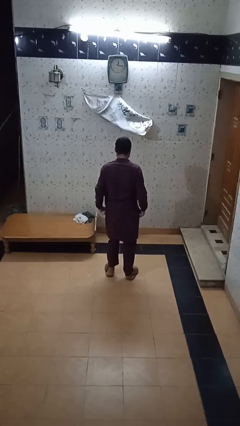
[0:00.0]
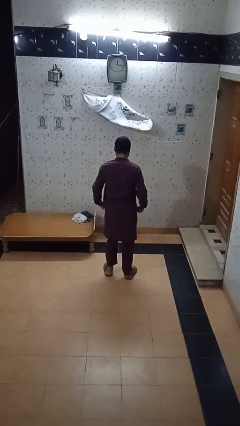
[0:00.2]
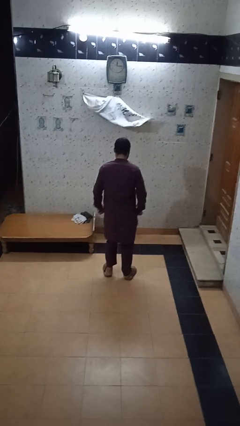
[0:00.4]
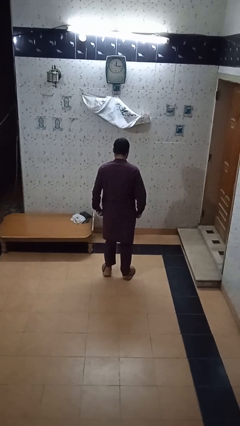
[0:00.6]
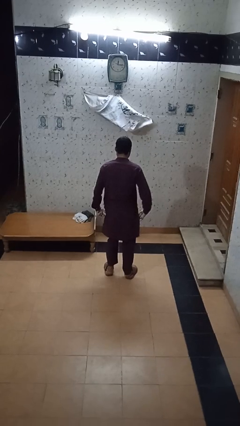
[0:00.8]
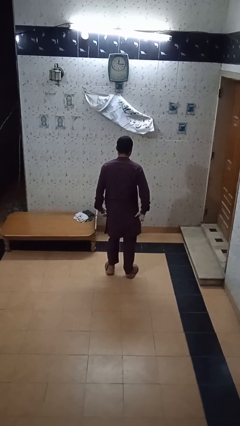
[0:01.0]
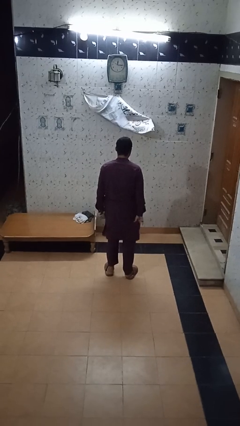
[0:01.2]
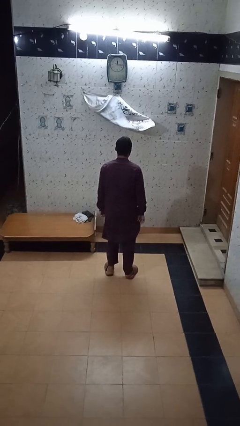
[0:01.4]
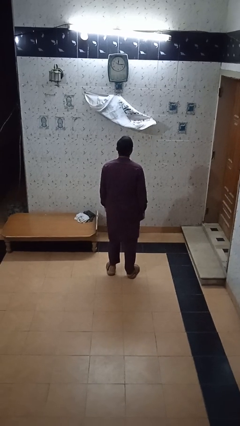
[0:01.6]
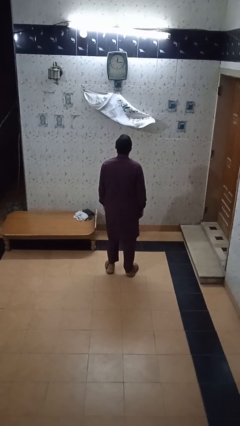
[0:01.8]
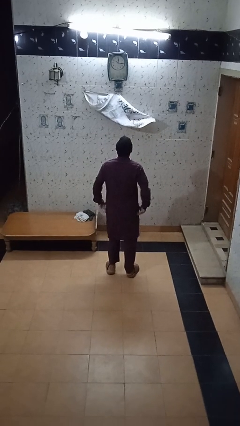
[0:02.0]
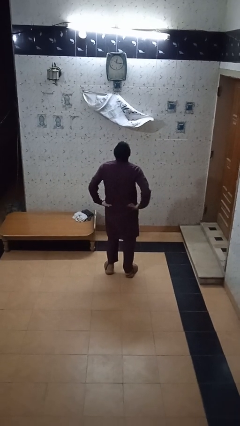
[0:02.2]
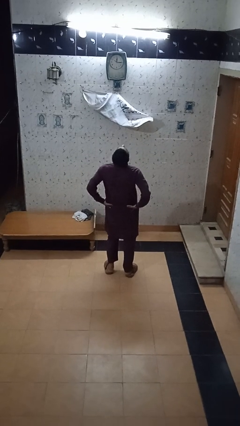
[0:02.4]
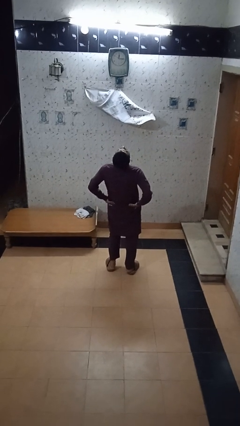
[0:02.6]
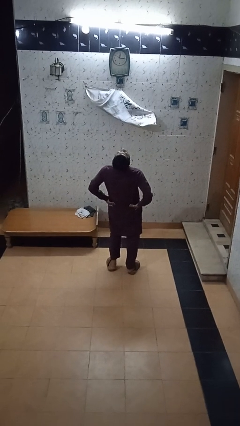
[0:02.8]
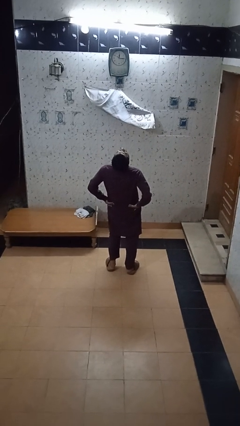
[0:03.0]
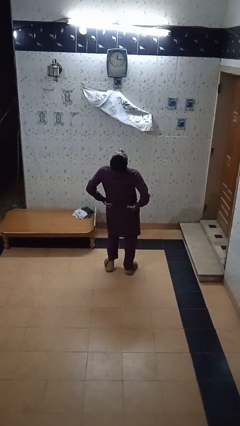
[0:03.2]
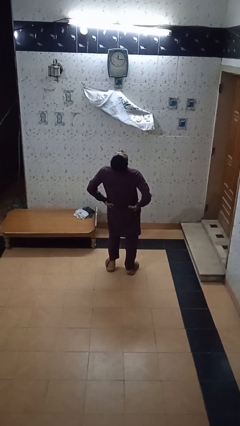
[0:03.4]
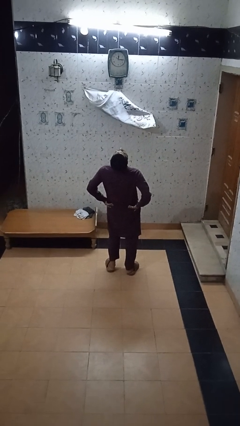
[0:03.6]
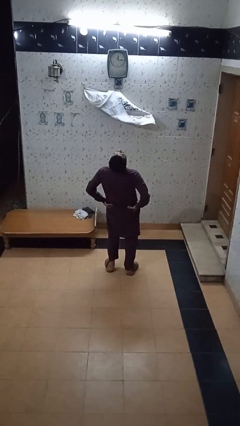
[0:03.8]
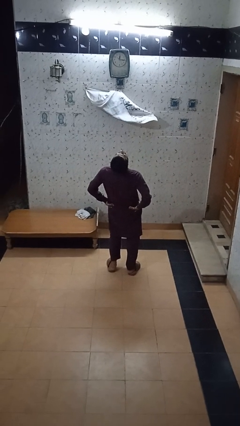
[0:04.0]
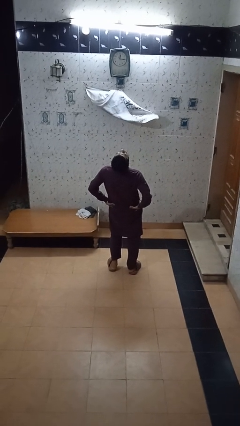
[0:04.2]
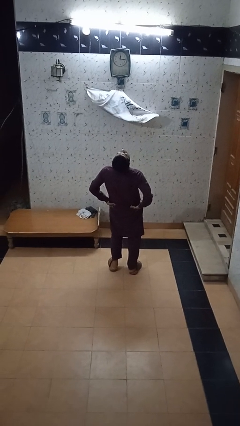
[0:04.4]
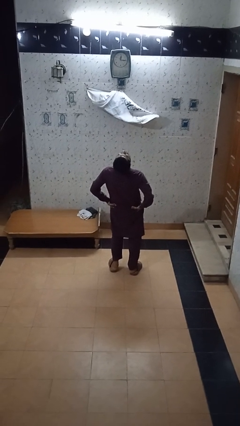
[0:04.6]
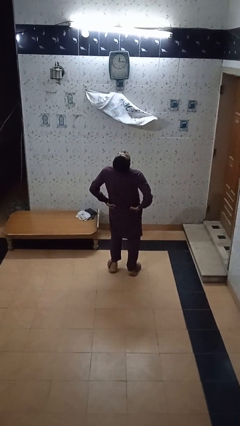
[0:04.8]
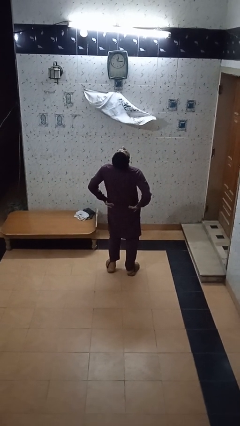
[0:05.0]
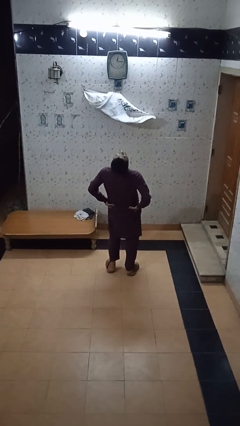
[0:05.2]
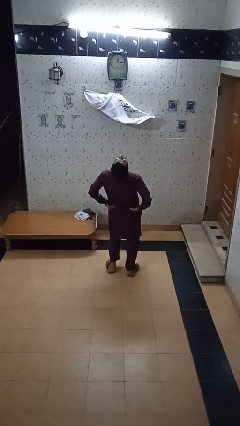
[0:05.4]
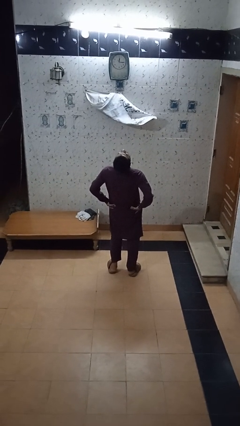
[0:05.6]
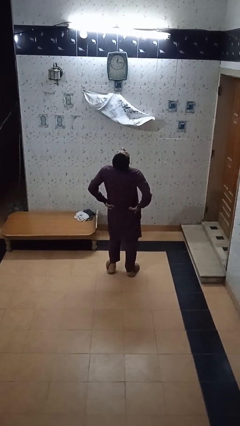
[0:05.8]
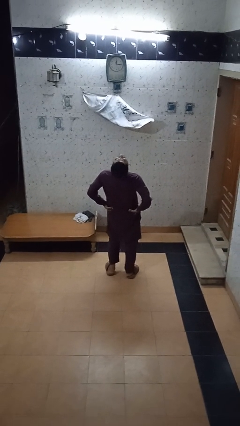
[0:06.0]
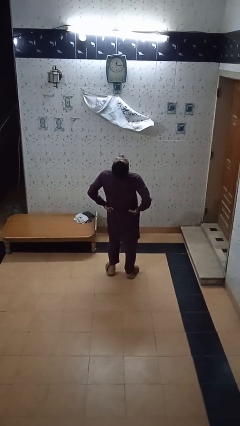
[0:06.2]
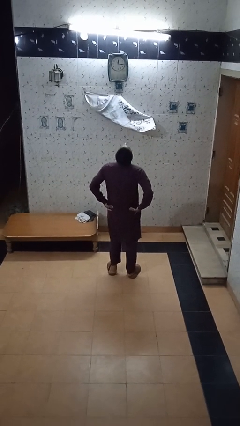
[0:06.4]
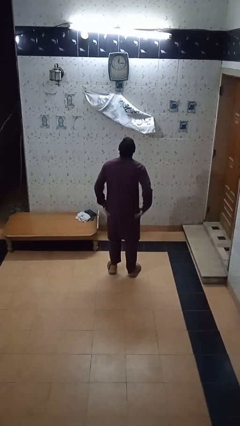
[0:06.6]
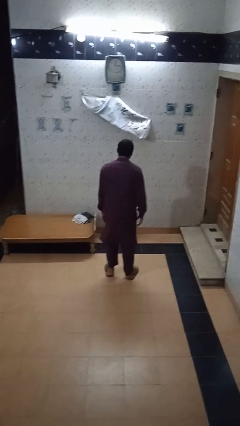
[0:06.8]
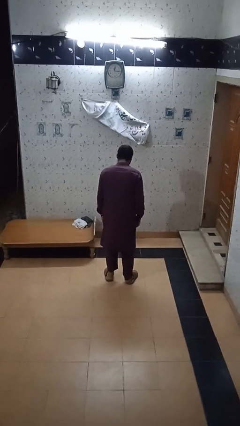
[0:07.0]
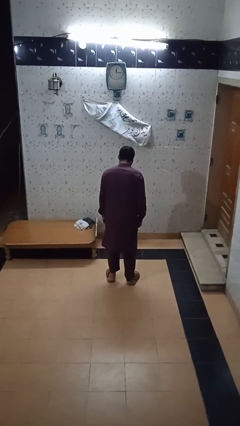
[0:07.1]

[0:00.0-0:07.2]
person stretches back

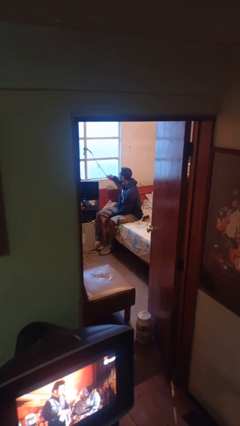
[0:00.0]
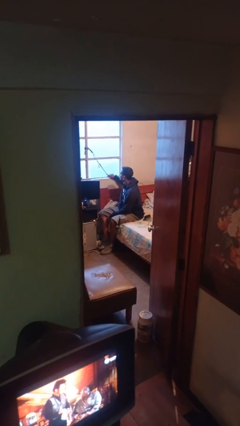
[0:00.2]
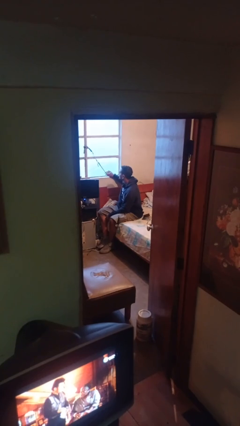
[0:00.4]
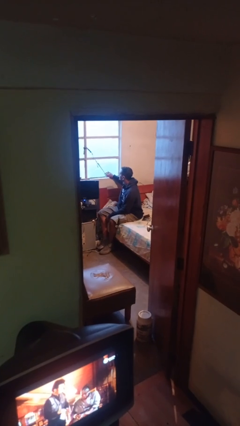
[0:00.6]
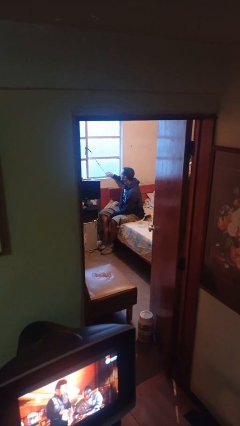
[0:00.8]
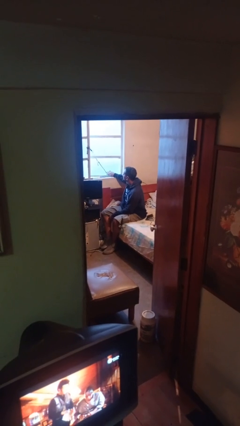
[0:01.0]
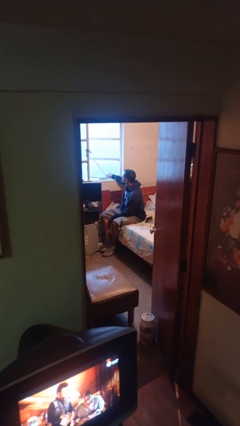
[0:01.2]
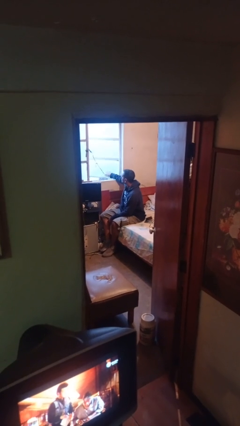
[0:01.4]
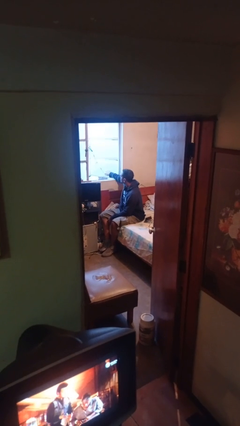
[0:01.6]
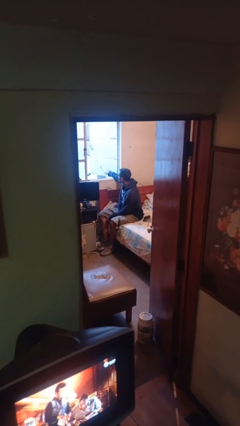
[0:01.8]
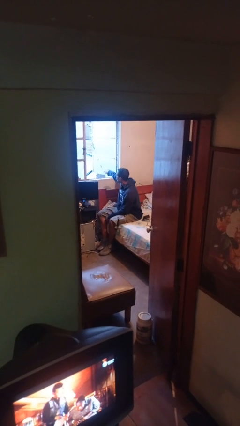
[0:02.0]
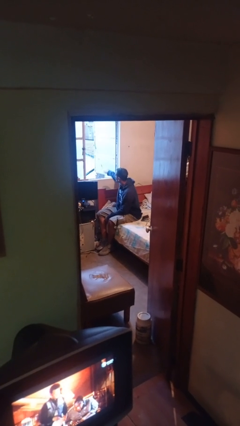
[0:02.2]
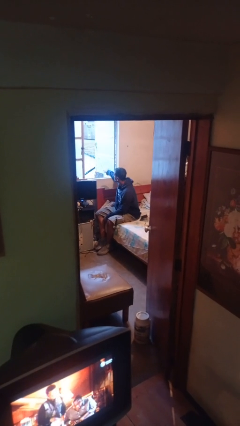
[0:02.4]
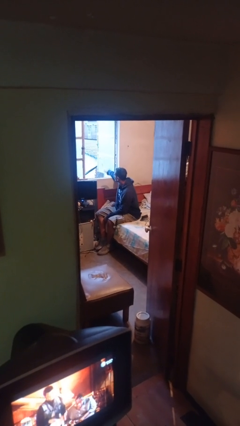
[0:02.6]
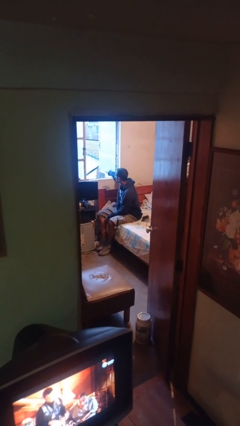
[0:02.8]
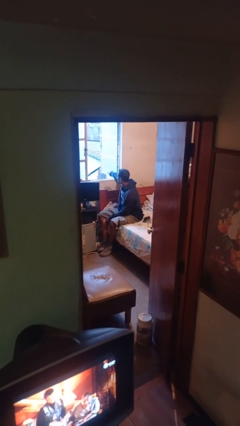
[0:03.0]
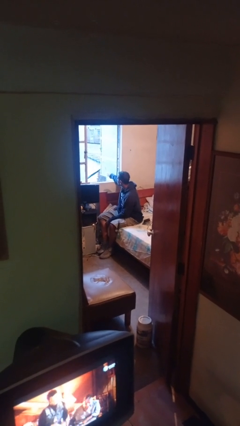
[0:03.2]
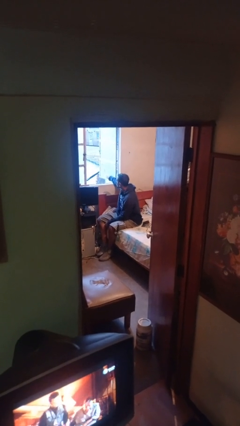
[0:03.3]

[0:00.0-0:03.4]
person opens home window

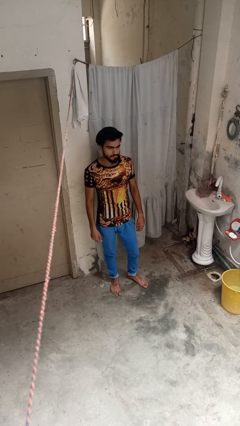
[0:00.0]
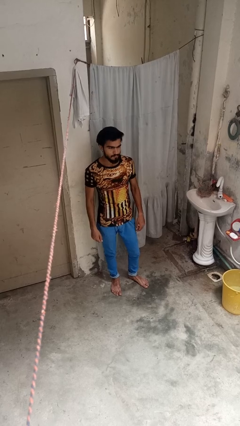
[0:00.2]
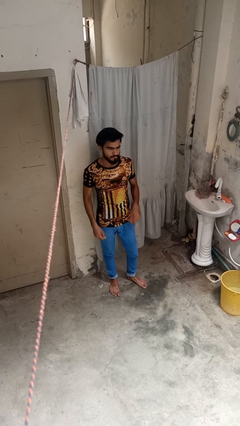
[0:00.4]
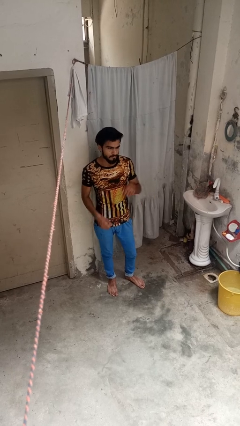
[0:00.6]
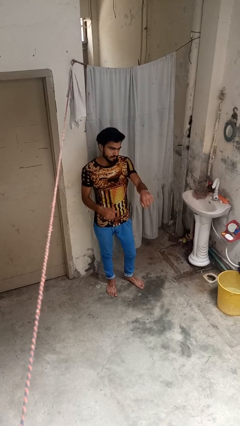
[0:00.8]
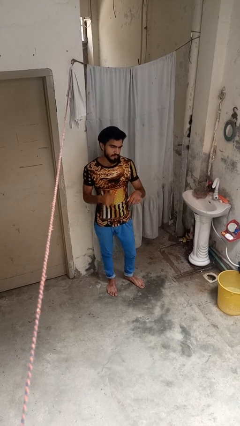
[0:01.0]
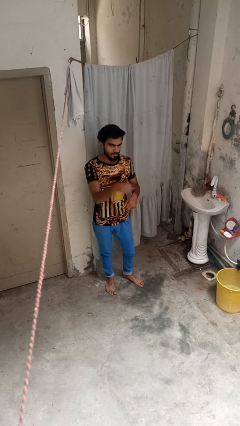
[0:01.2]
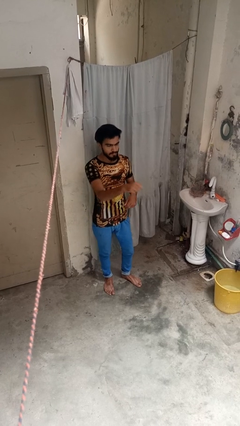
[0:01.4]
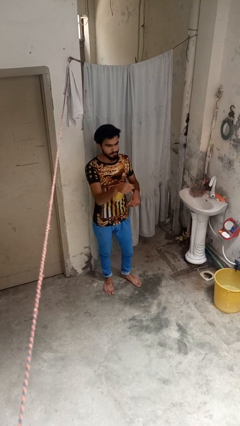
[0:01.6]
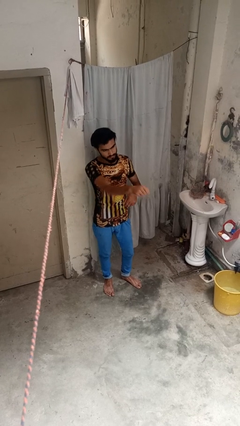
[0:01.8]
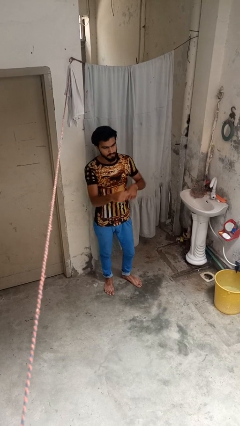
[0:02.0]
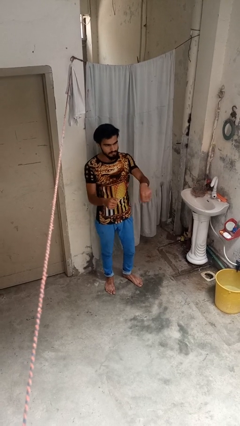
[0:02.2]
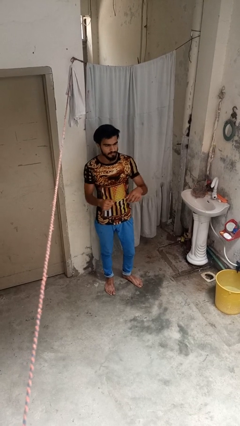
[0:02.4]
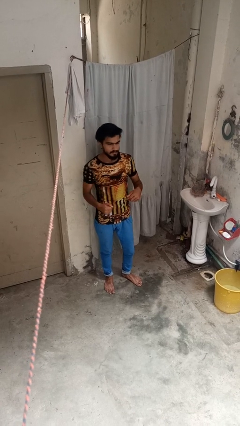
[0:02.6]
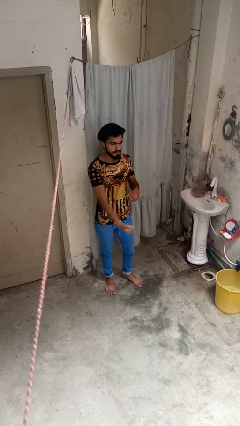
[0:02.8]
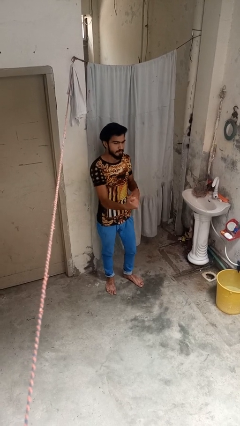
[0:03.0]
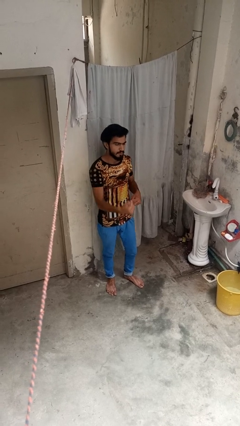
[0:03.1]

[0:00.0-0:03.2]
person punches

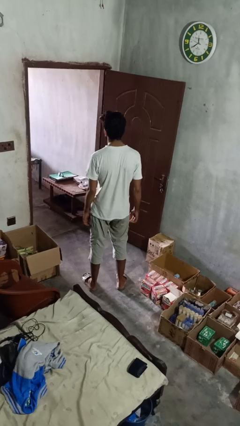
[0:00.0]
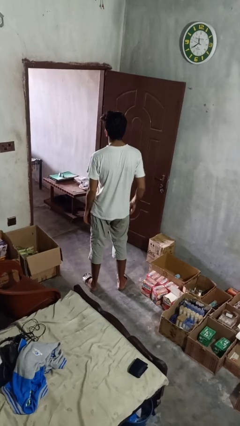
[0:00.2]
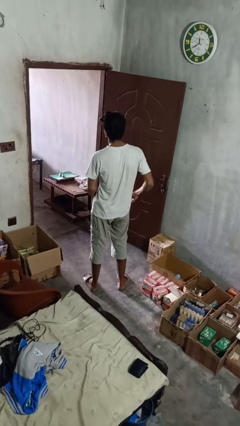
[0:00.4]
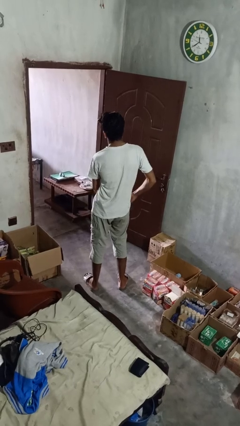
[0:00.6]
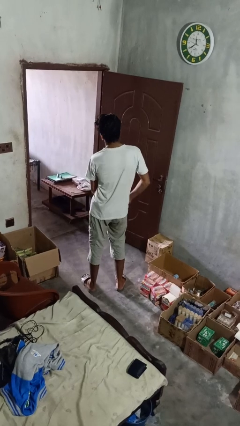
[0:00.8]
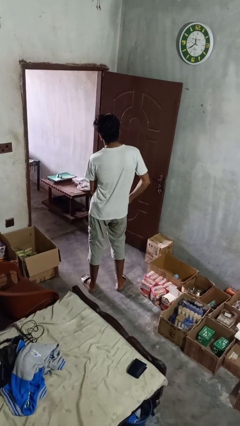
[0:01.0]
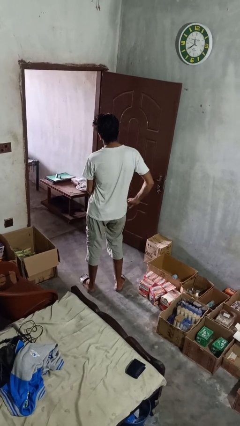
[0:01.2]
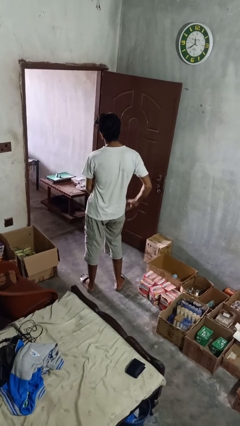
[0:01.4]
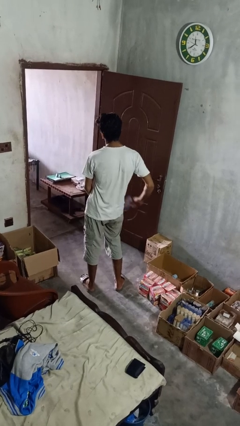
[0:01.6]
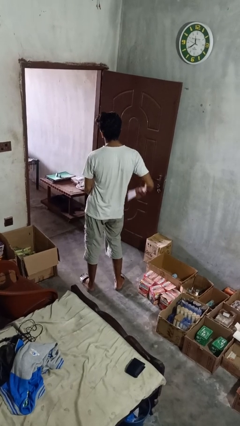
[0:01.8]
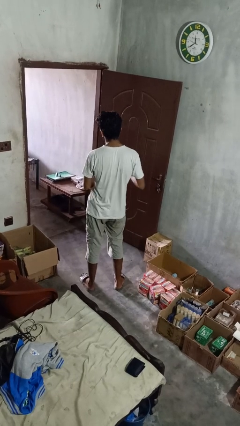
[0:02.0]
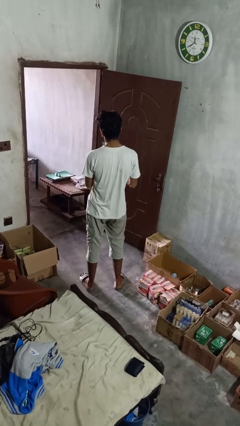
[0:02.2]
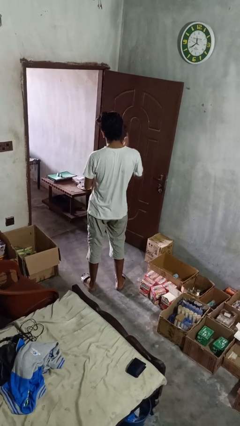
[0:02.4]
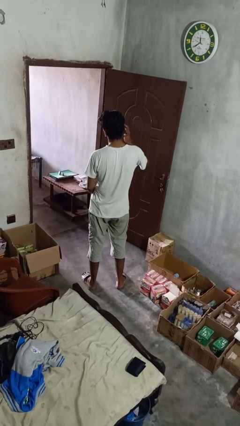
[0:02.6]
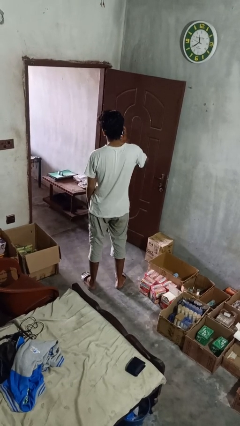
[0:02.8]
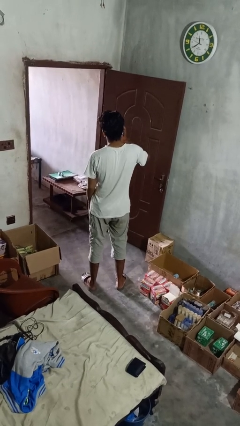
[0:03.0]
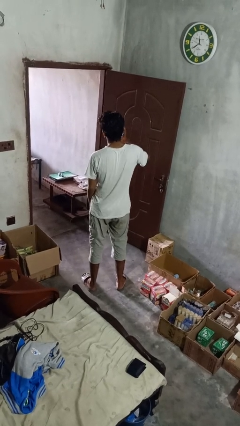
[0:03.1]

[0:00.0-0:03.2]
person takes phone from pocket

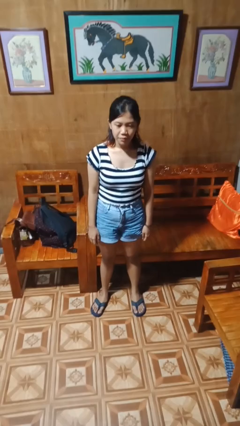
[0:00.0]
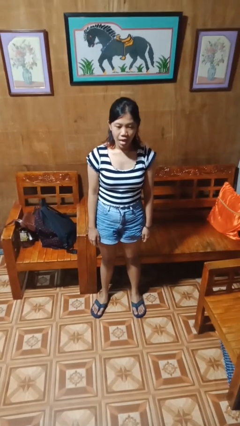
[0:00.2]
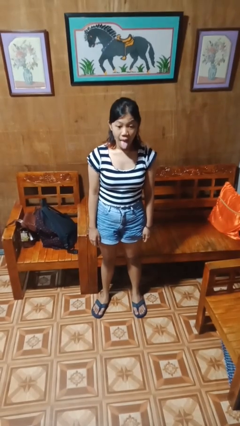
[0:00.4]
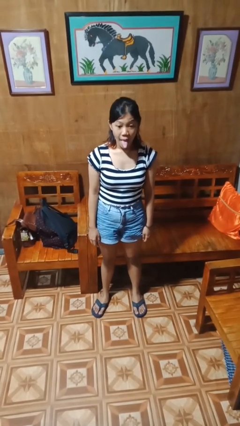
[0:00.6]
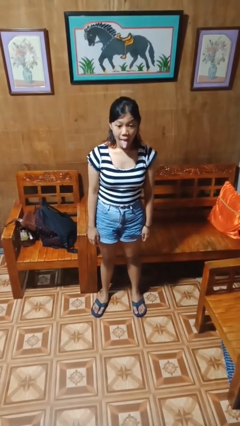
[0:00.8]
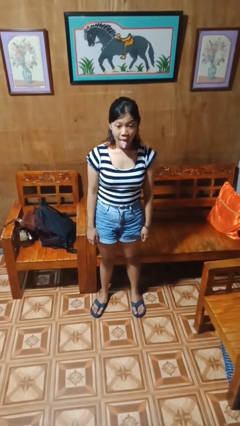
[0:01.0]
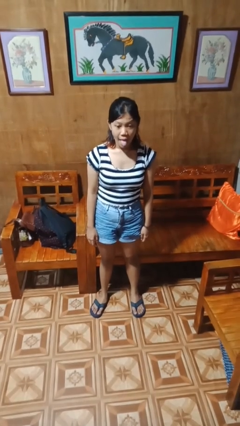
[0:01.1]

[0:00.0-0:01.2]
person sticks out tongue
